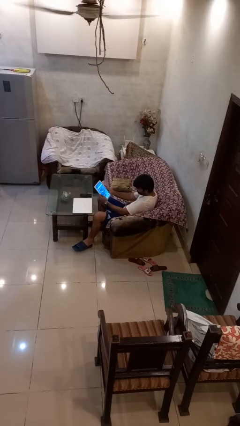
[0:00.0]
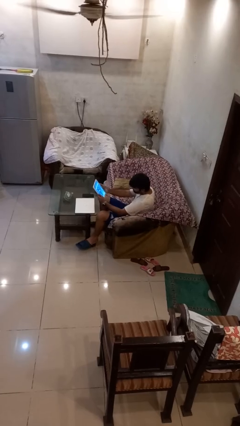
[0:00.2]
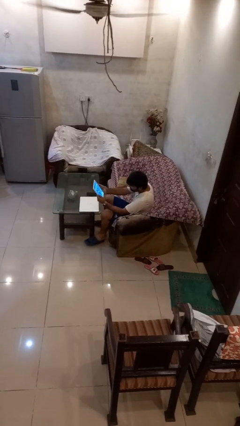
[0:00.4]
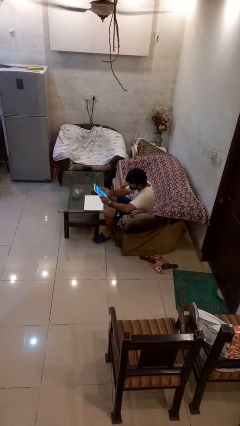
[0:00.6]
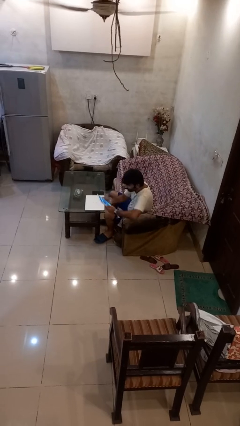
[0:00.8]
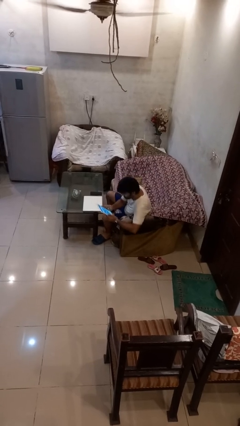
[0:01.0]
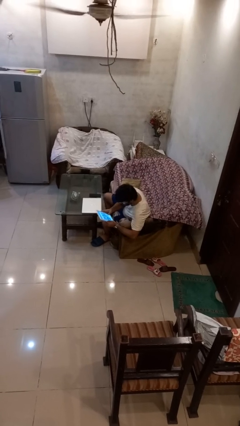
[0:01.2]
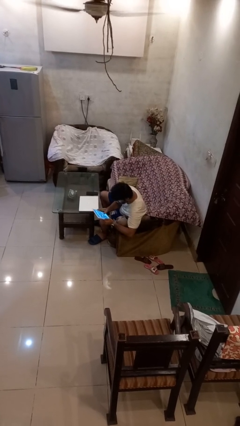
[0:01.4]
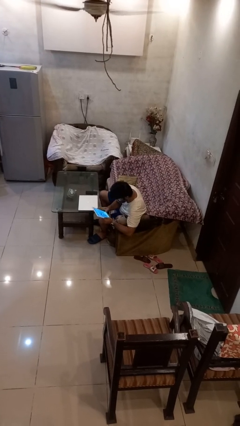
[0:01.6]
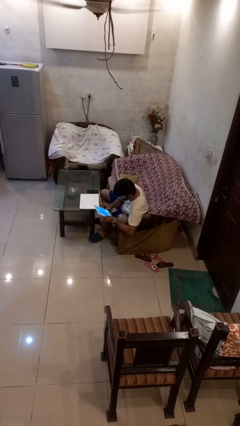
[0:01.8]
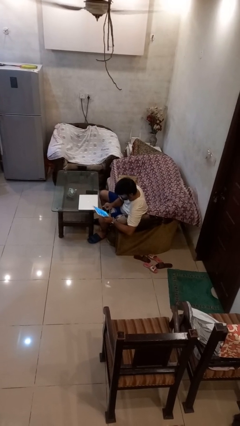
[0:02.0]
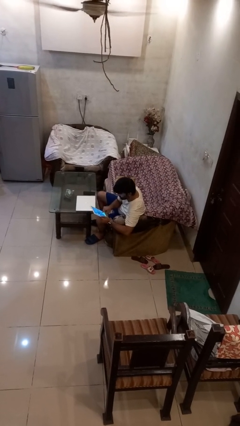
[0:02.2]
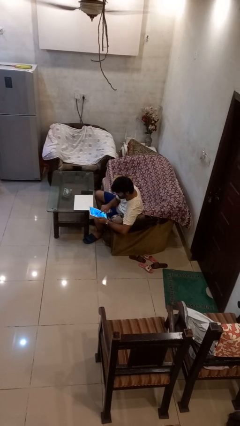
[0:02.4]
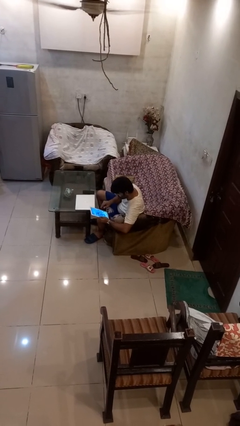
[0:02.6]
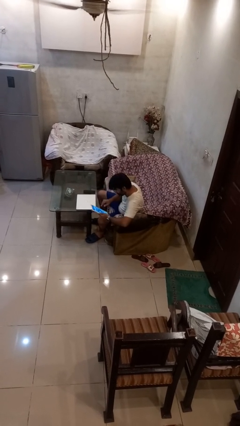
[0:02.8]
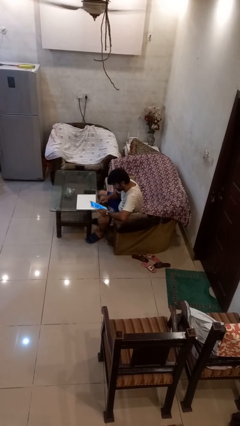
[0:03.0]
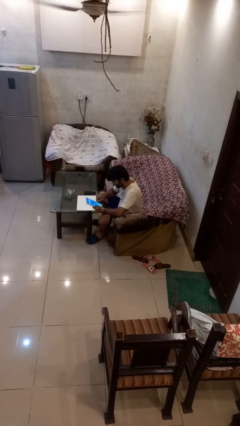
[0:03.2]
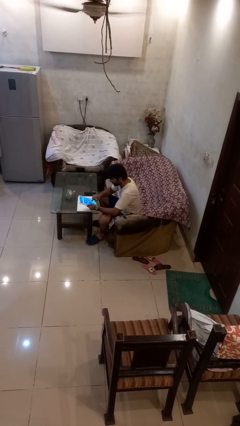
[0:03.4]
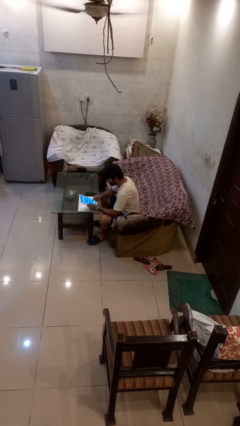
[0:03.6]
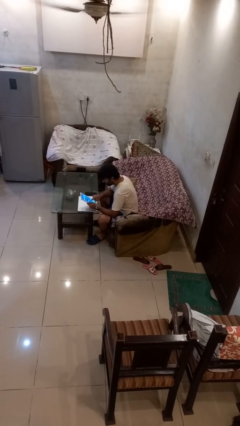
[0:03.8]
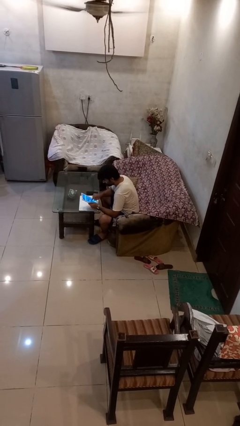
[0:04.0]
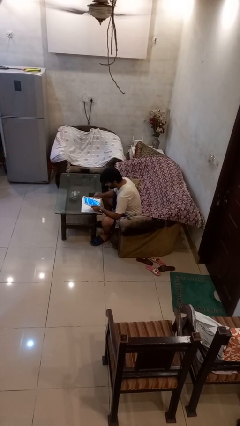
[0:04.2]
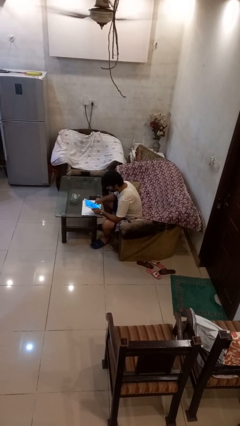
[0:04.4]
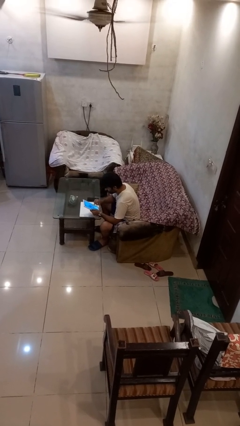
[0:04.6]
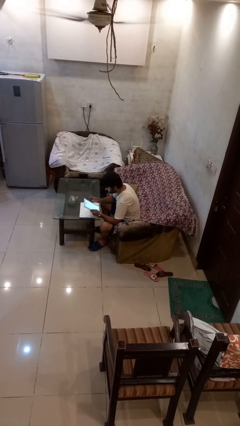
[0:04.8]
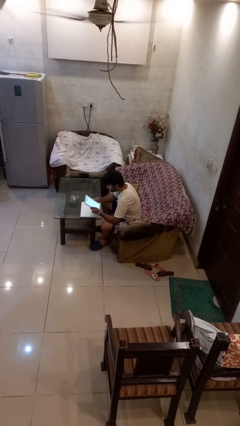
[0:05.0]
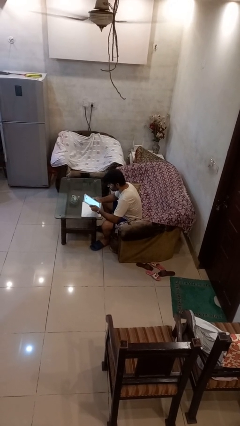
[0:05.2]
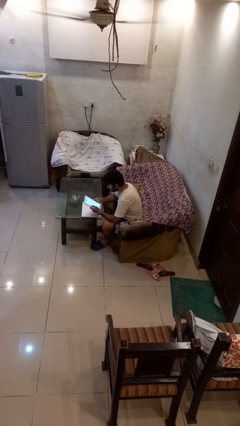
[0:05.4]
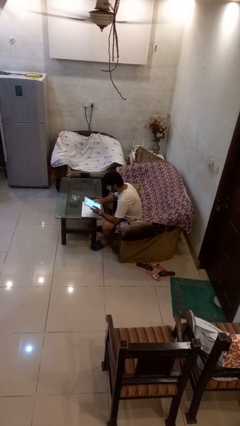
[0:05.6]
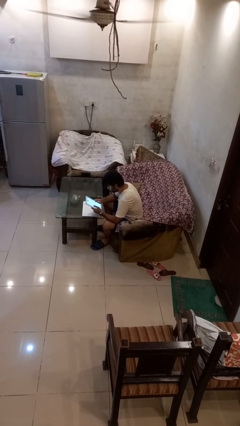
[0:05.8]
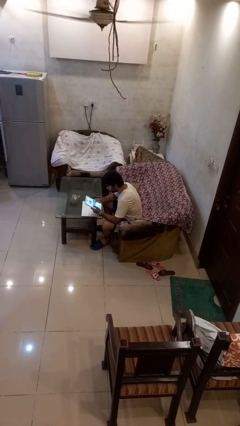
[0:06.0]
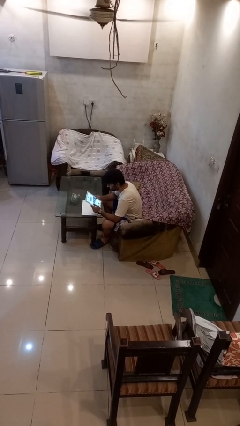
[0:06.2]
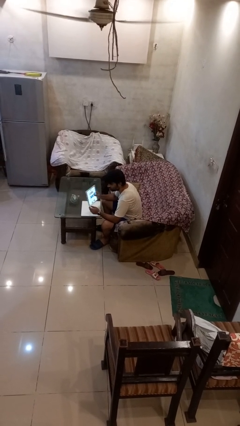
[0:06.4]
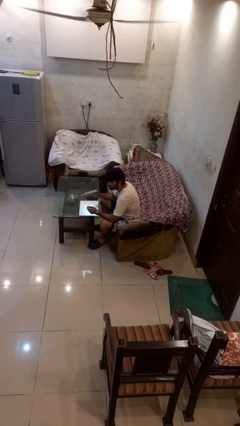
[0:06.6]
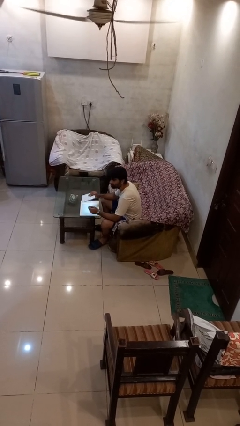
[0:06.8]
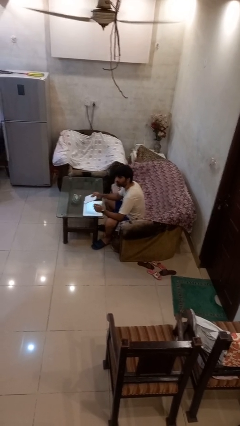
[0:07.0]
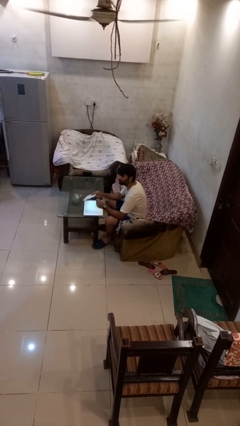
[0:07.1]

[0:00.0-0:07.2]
person interacts with tablet

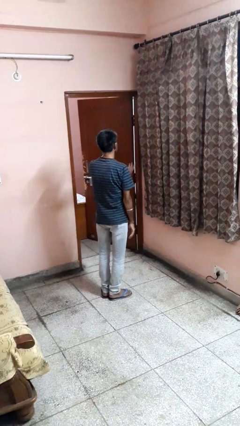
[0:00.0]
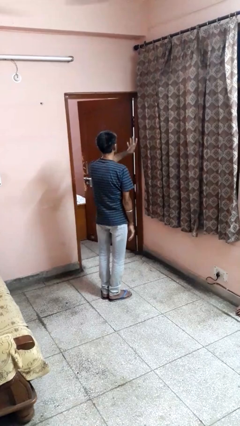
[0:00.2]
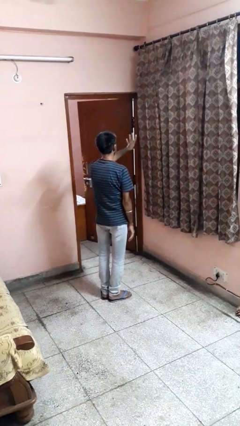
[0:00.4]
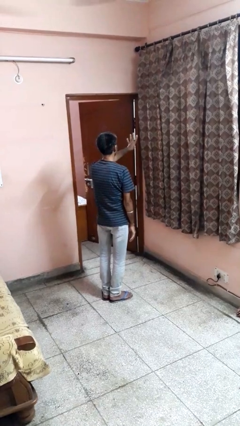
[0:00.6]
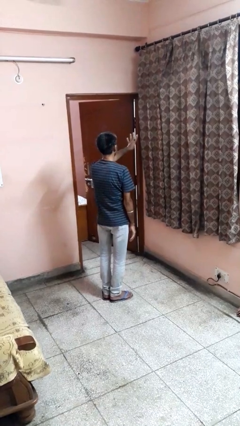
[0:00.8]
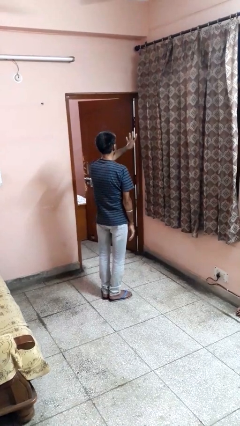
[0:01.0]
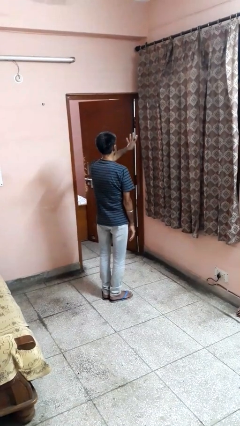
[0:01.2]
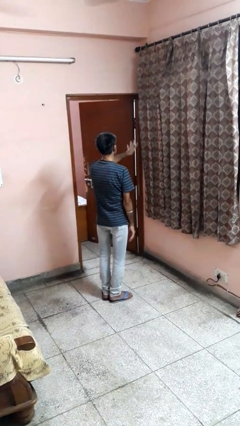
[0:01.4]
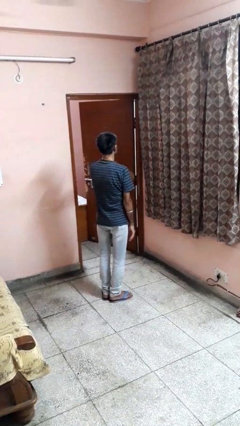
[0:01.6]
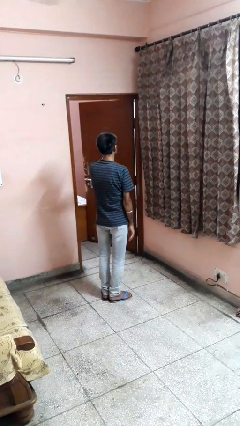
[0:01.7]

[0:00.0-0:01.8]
person gestures number four

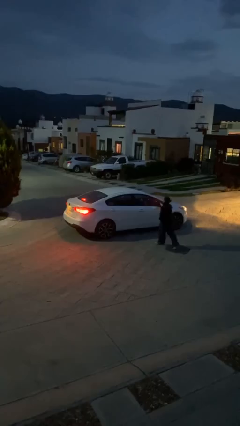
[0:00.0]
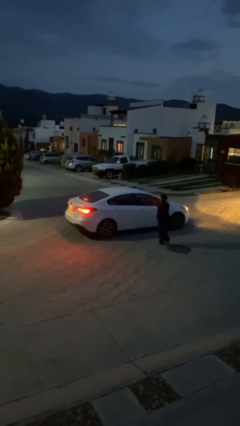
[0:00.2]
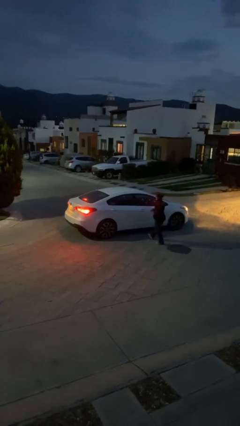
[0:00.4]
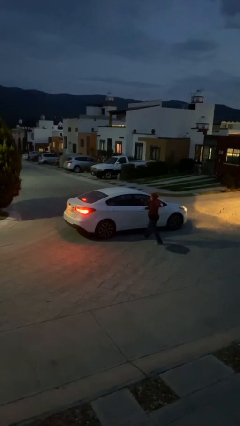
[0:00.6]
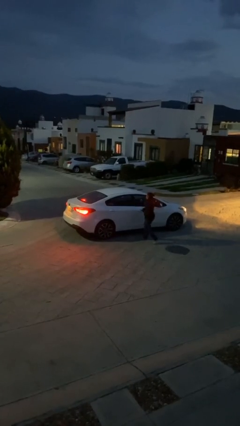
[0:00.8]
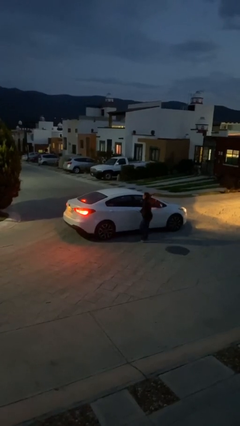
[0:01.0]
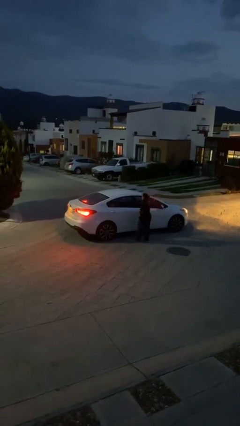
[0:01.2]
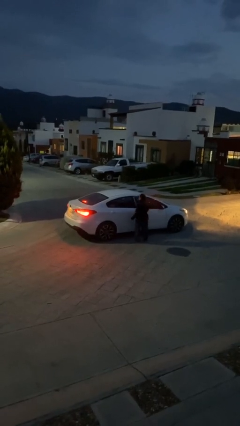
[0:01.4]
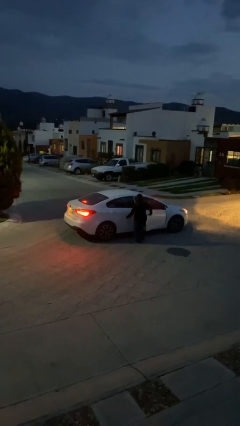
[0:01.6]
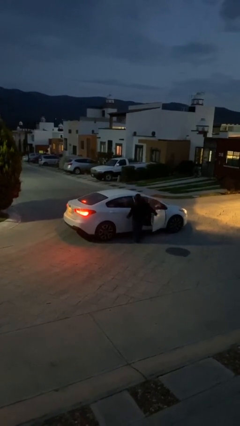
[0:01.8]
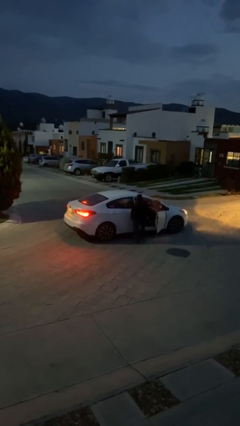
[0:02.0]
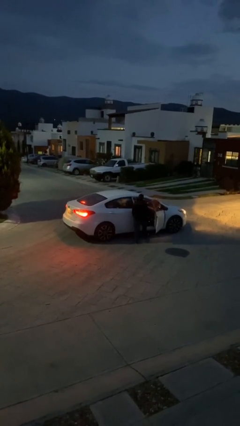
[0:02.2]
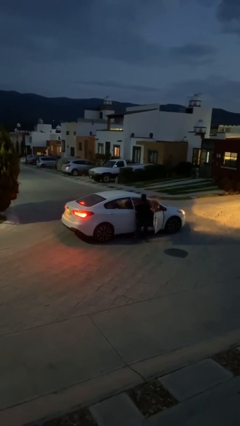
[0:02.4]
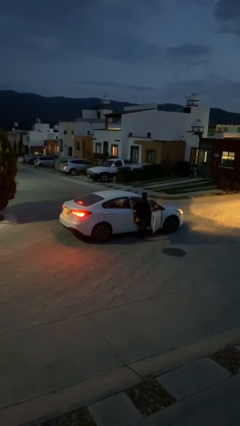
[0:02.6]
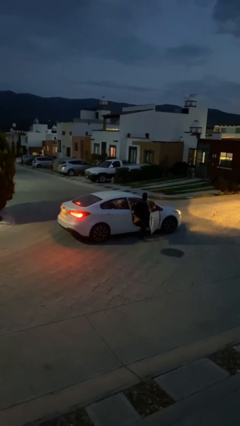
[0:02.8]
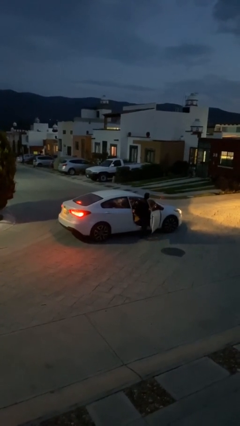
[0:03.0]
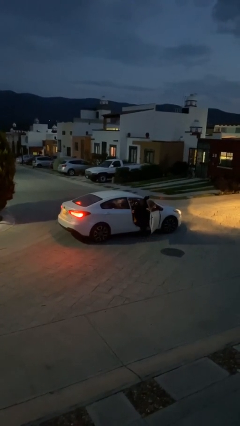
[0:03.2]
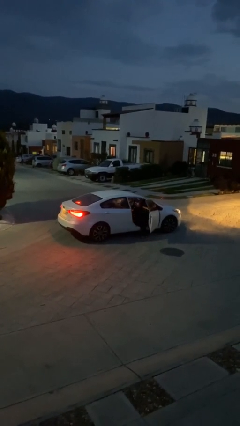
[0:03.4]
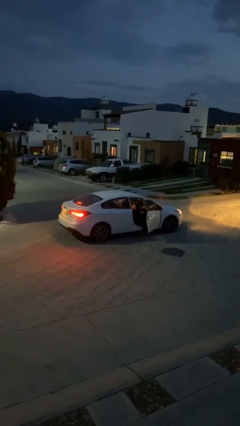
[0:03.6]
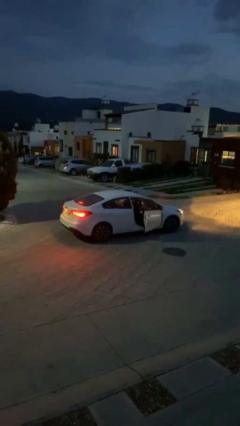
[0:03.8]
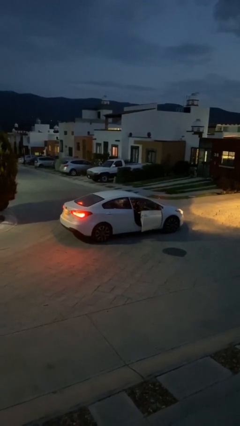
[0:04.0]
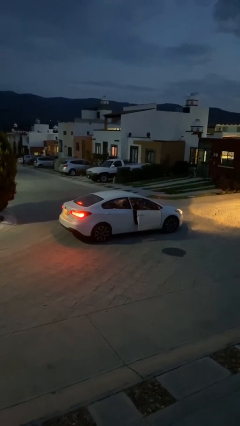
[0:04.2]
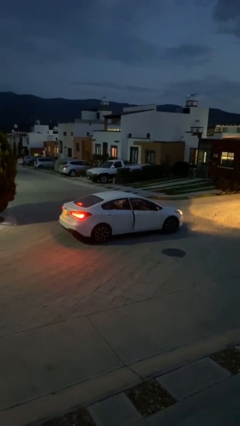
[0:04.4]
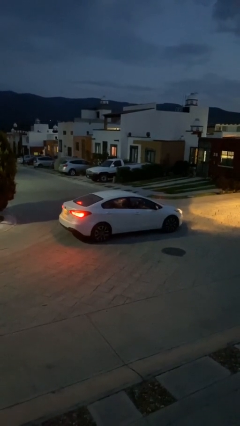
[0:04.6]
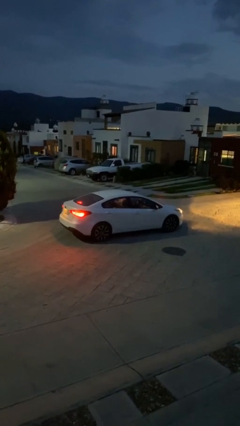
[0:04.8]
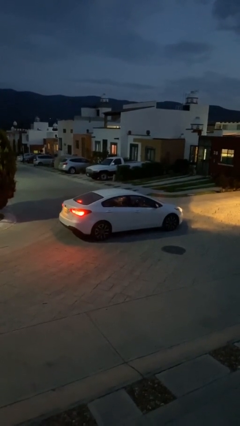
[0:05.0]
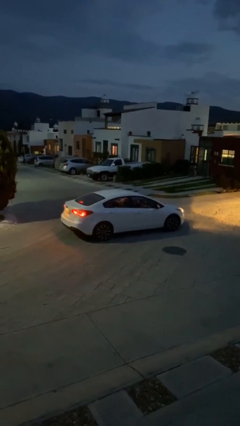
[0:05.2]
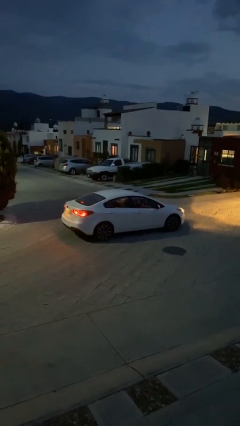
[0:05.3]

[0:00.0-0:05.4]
car picks up person

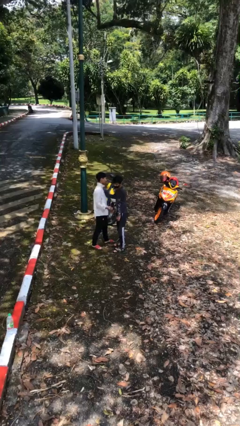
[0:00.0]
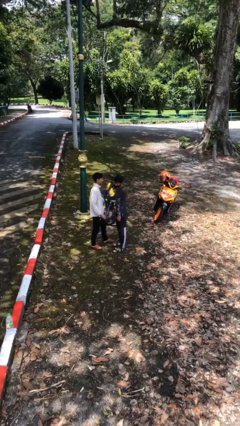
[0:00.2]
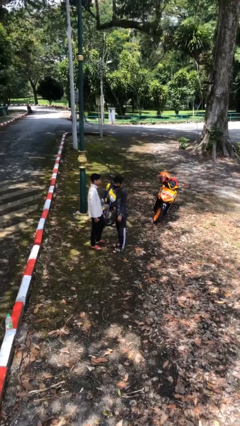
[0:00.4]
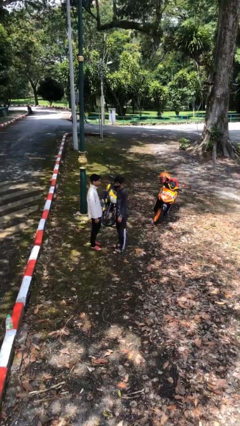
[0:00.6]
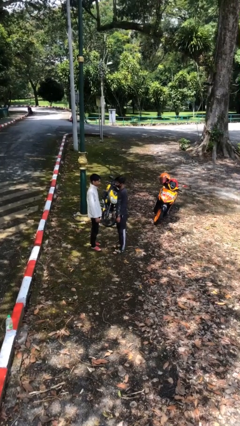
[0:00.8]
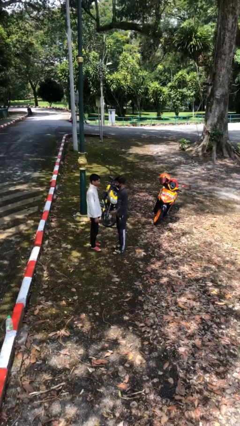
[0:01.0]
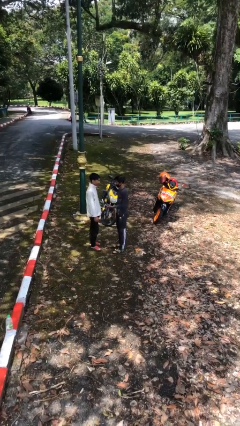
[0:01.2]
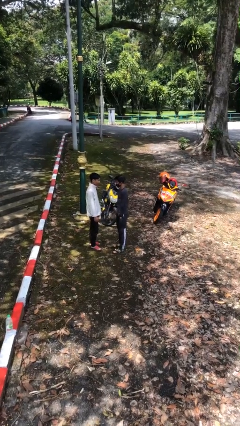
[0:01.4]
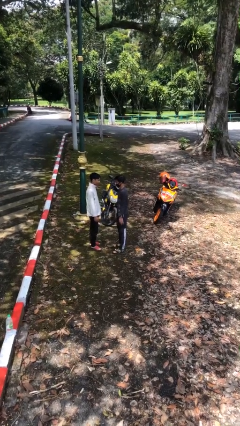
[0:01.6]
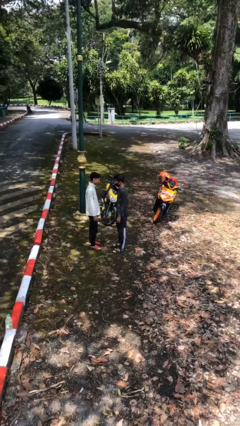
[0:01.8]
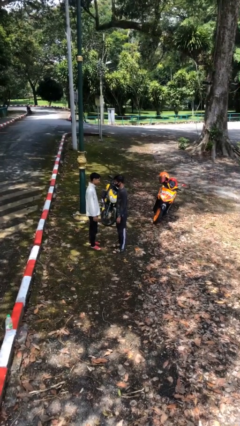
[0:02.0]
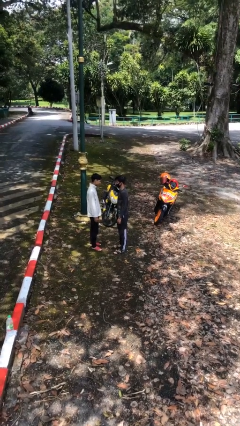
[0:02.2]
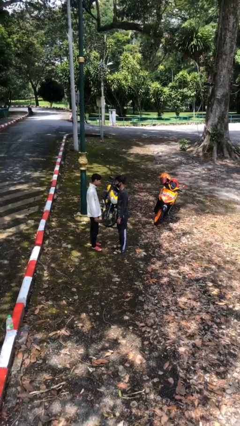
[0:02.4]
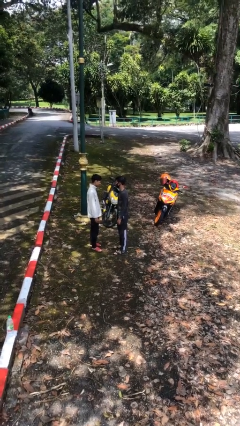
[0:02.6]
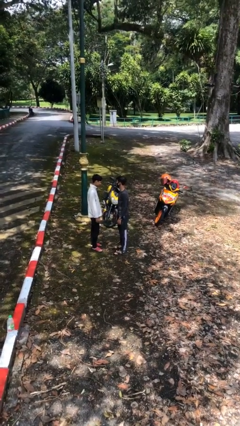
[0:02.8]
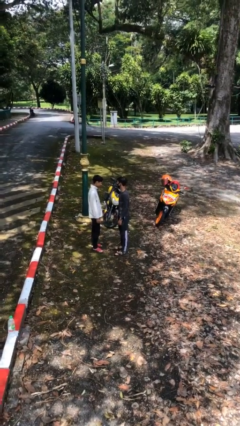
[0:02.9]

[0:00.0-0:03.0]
person talks to person

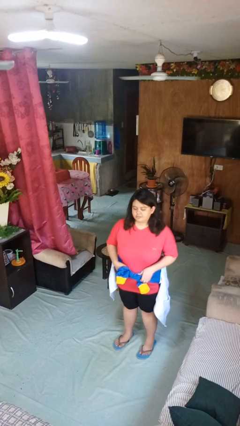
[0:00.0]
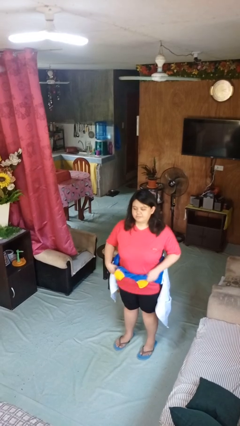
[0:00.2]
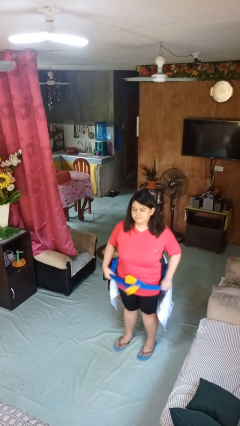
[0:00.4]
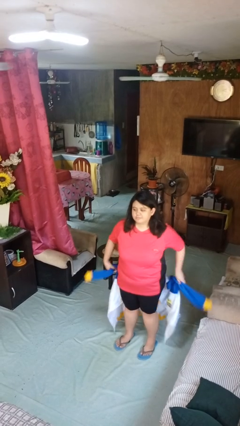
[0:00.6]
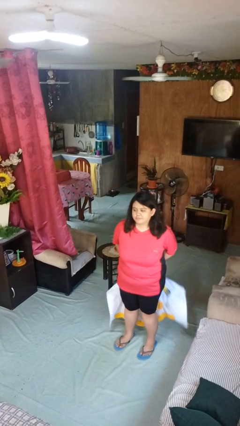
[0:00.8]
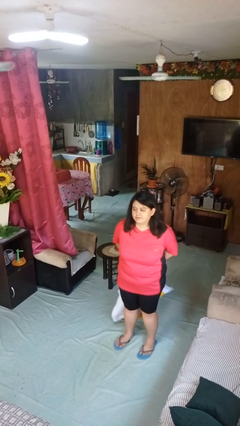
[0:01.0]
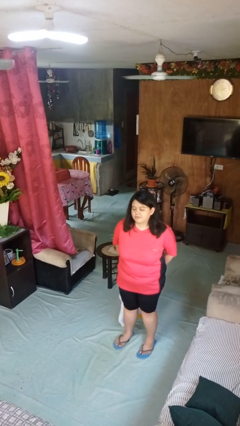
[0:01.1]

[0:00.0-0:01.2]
person unties jacket around waist
